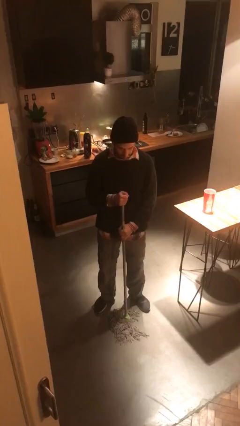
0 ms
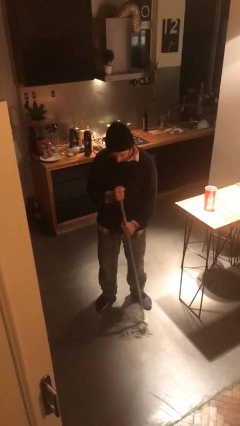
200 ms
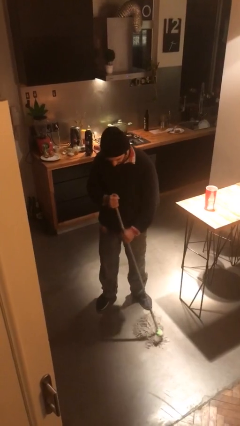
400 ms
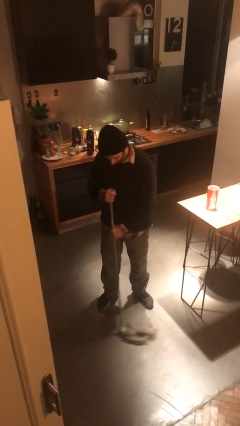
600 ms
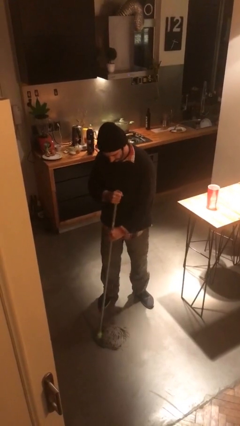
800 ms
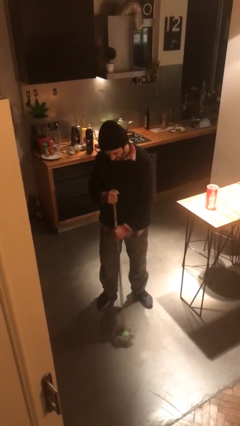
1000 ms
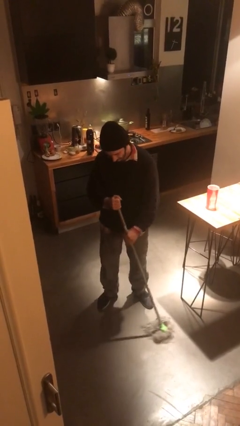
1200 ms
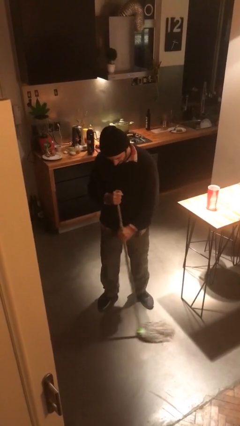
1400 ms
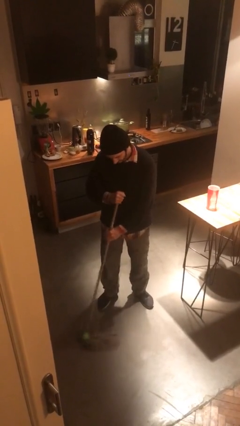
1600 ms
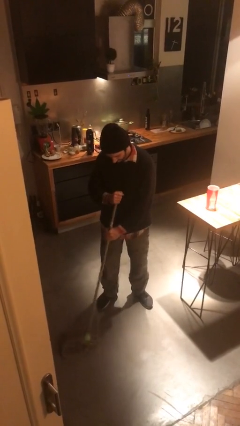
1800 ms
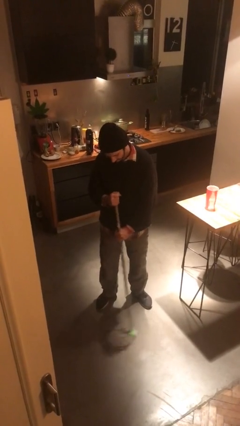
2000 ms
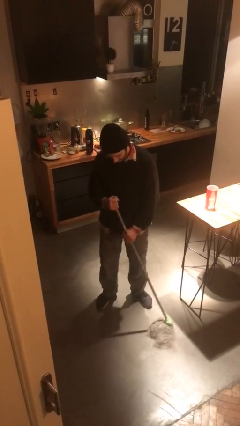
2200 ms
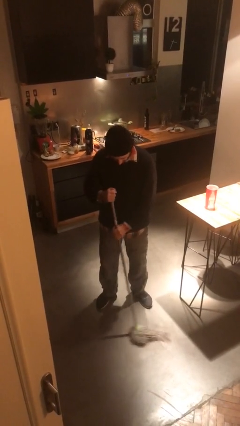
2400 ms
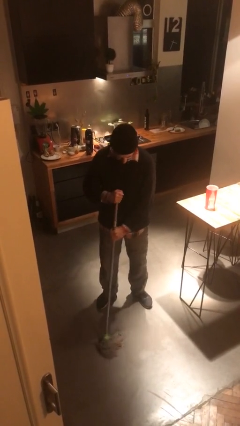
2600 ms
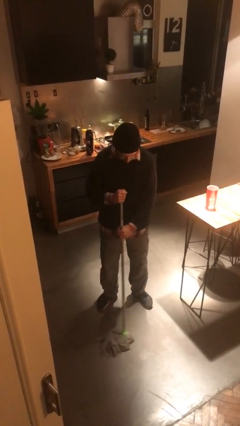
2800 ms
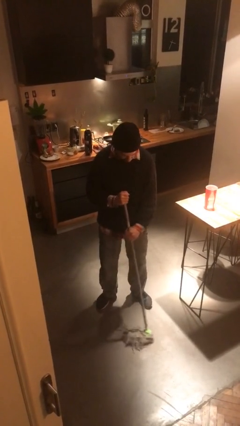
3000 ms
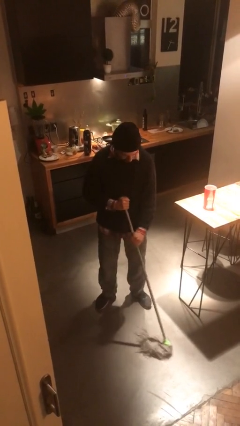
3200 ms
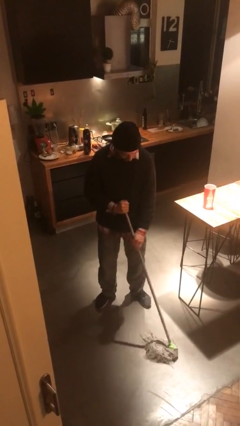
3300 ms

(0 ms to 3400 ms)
person mops

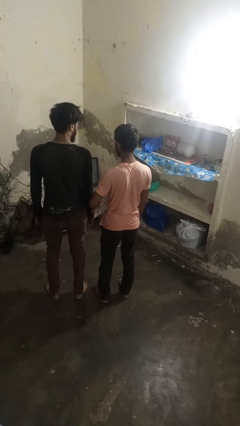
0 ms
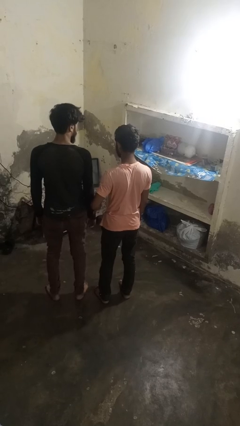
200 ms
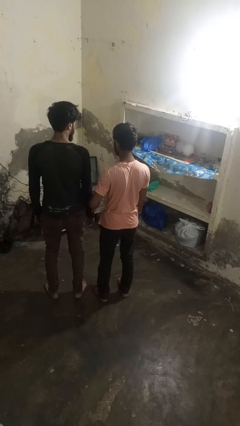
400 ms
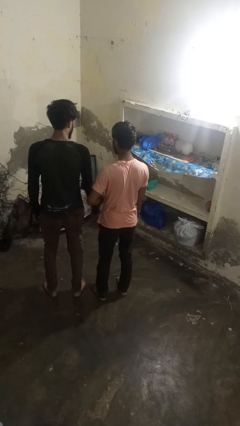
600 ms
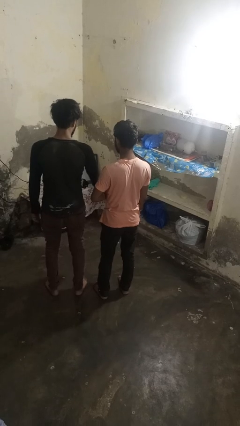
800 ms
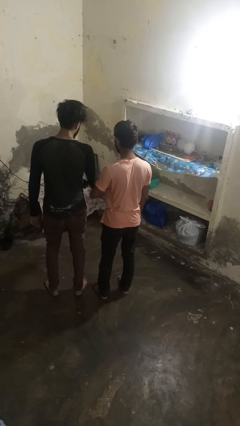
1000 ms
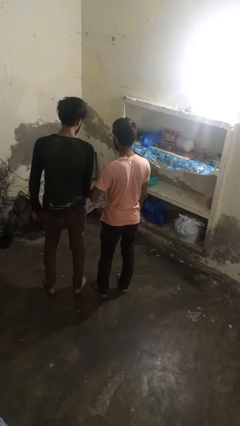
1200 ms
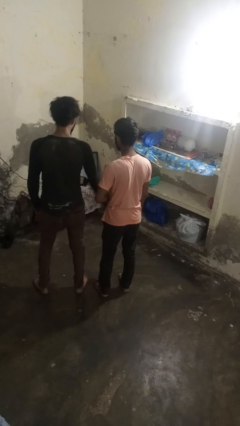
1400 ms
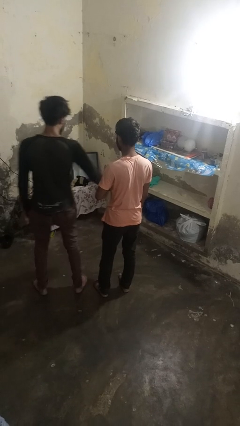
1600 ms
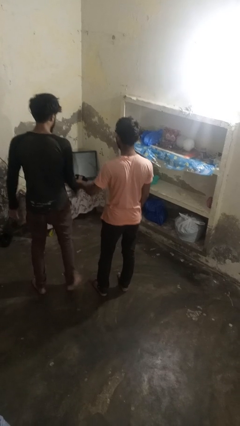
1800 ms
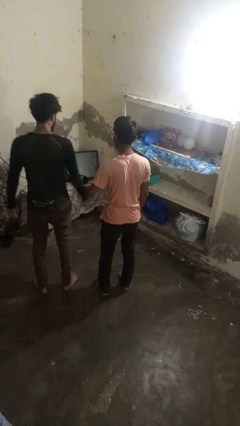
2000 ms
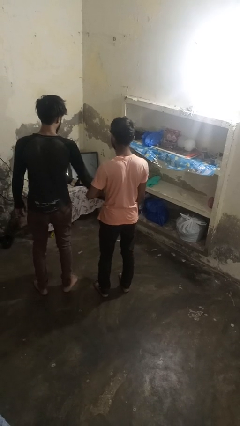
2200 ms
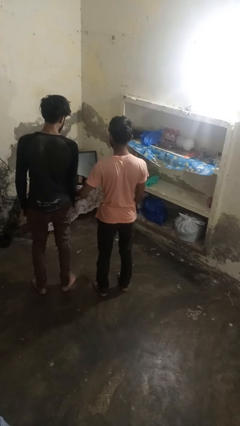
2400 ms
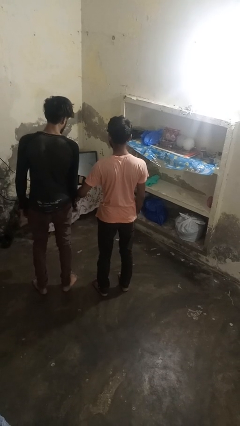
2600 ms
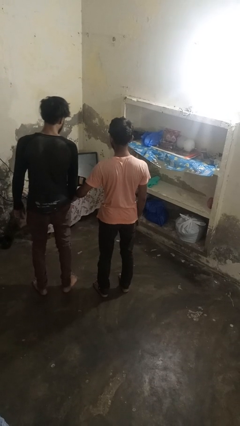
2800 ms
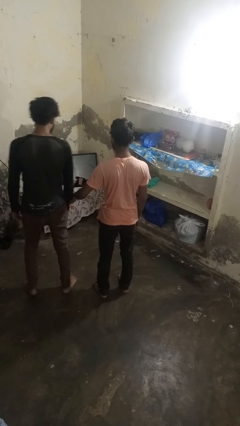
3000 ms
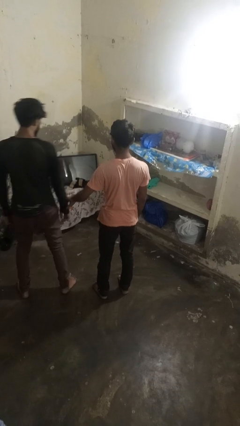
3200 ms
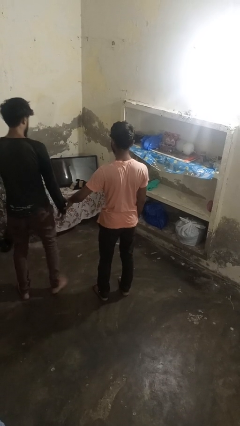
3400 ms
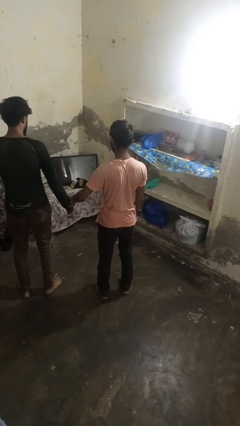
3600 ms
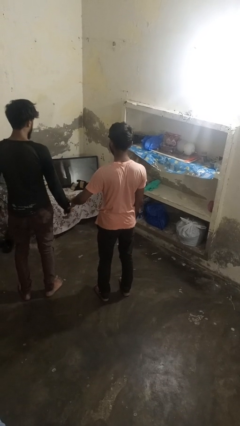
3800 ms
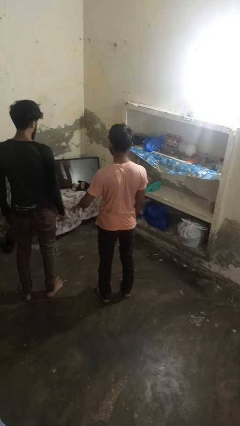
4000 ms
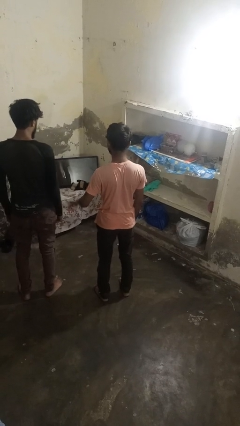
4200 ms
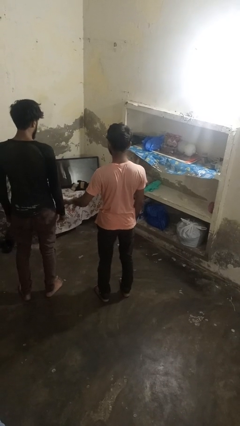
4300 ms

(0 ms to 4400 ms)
person grabs person by forearm

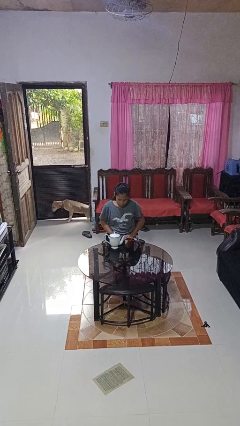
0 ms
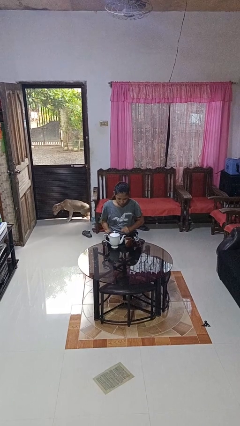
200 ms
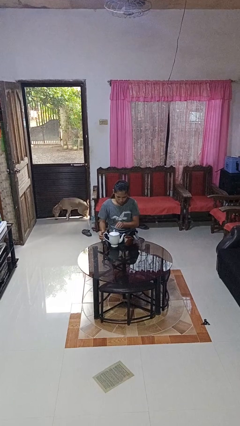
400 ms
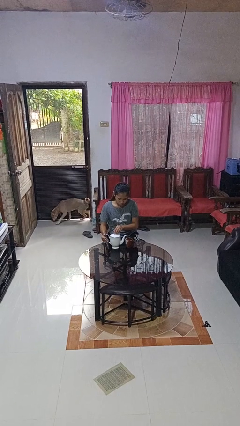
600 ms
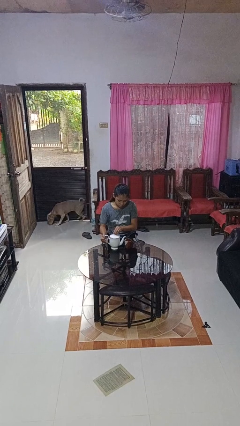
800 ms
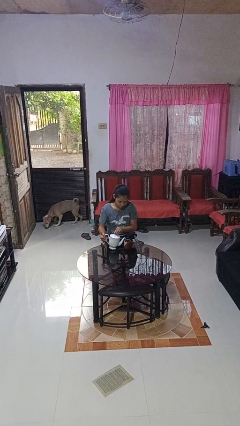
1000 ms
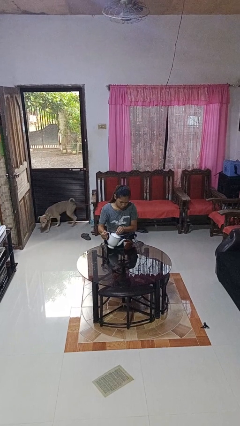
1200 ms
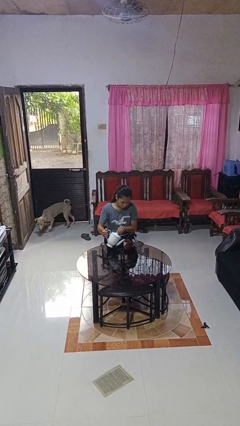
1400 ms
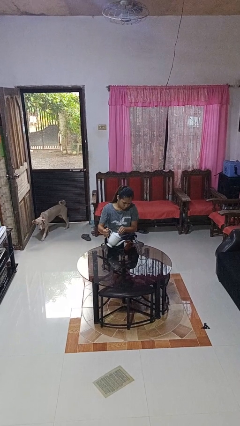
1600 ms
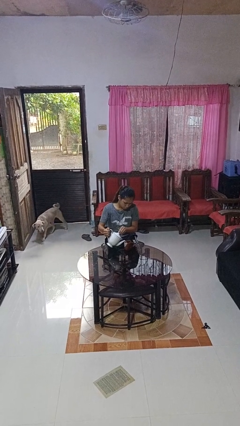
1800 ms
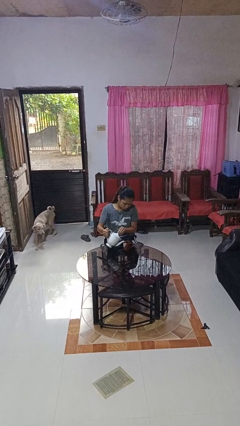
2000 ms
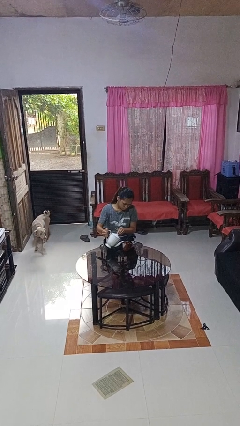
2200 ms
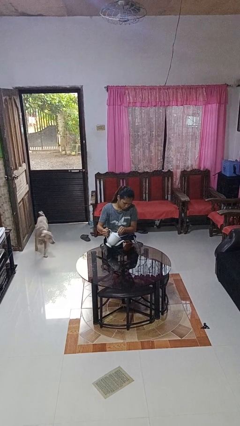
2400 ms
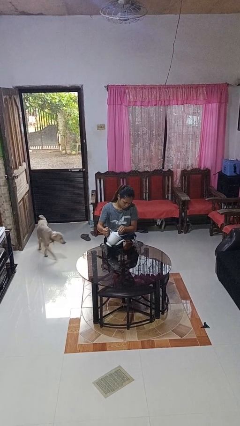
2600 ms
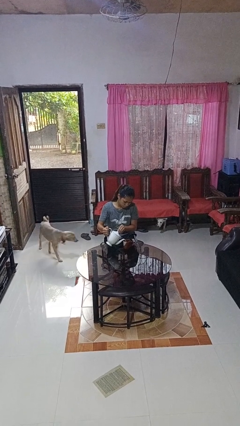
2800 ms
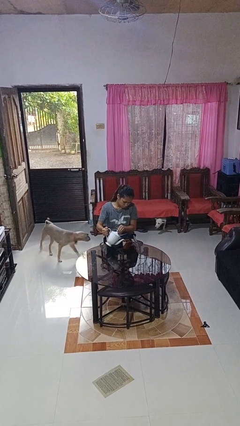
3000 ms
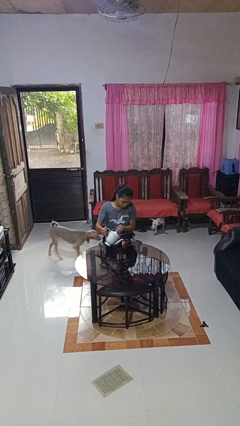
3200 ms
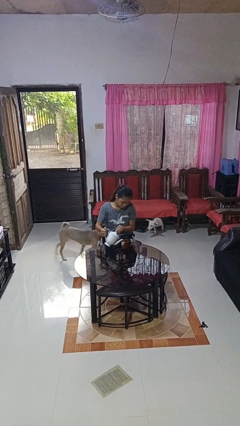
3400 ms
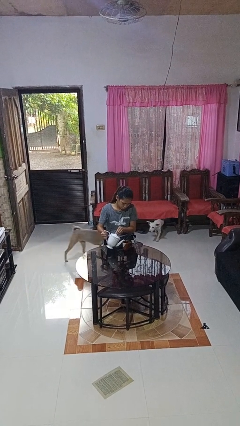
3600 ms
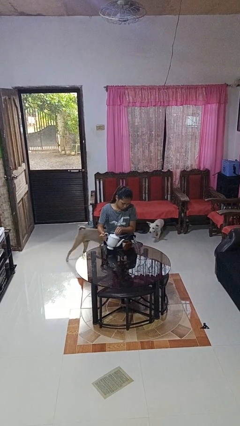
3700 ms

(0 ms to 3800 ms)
person pours coffee into mug

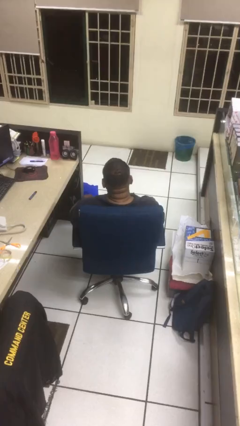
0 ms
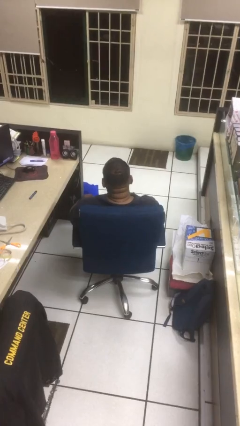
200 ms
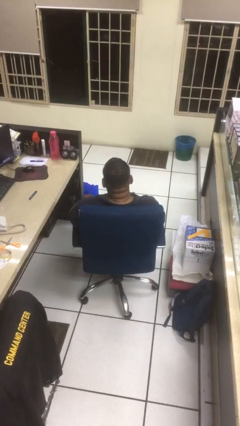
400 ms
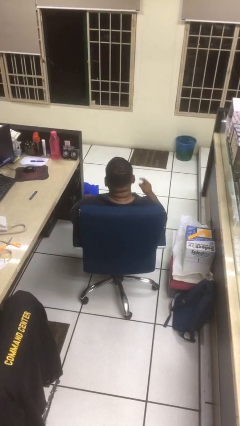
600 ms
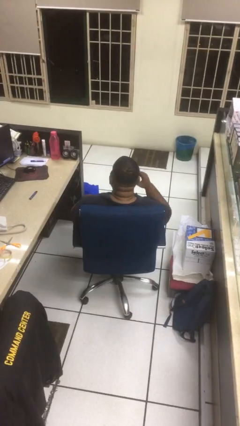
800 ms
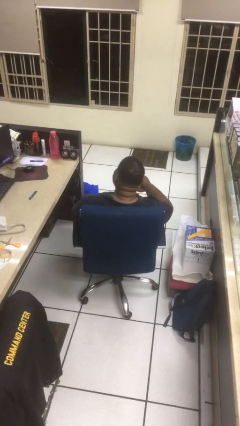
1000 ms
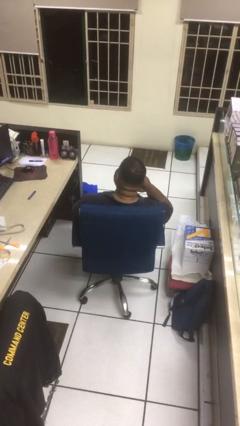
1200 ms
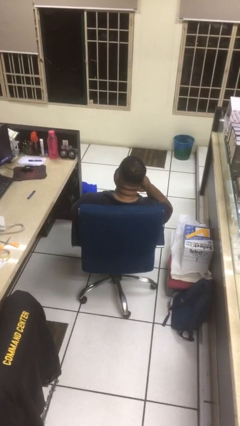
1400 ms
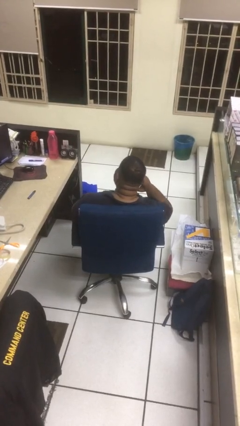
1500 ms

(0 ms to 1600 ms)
person gestures listen closely

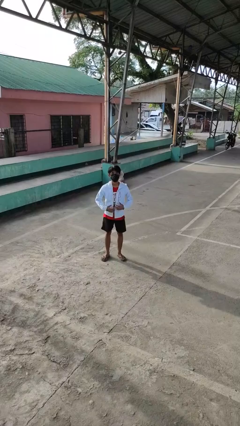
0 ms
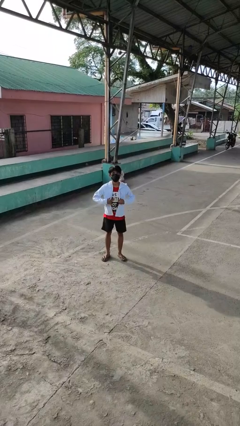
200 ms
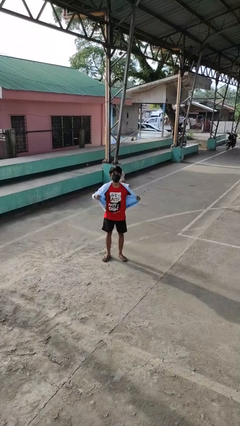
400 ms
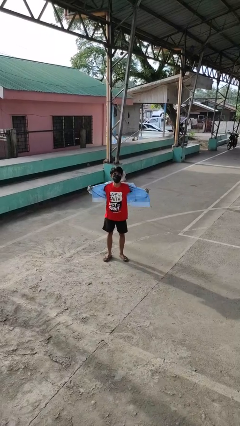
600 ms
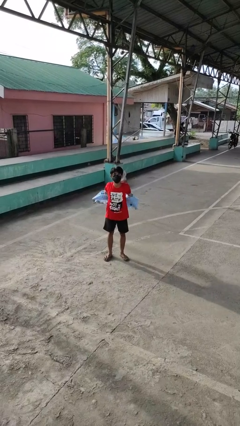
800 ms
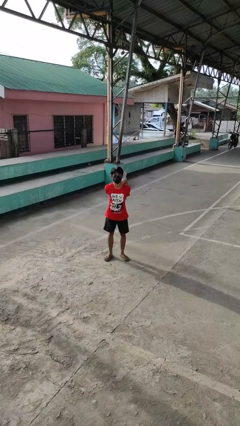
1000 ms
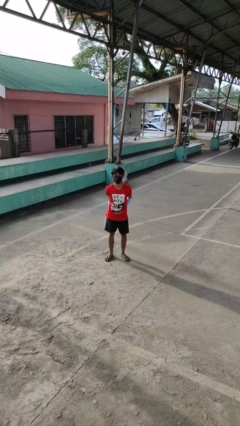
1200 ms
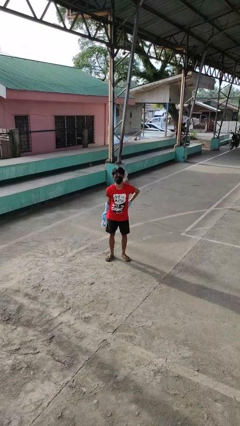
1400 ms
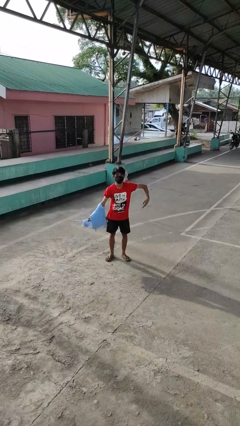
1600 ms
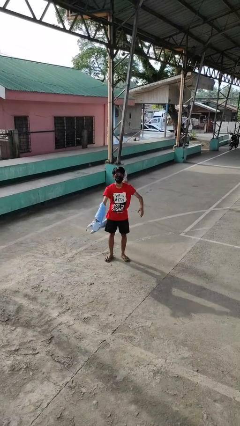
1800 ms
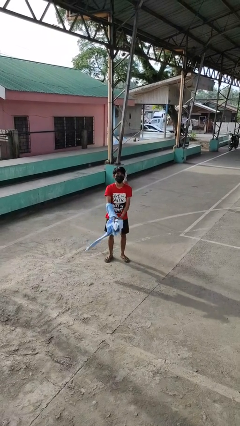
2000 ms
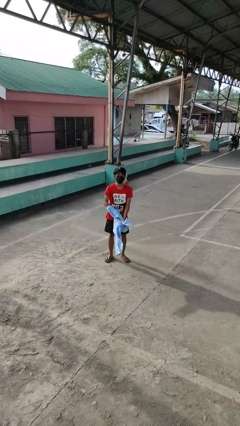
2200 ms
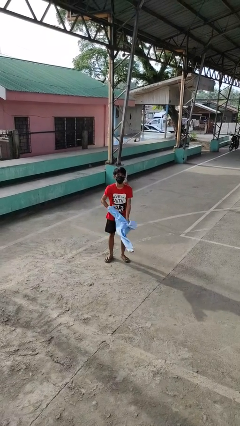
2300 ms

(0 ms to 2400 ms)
person takes off jacket

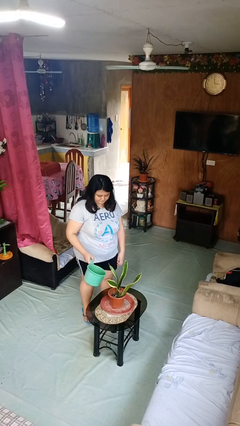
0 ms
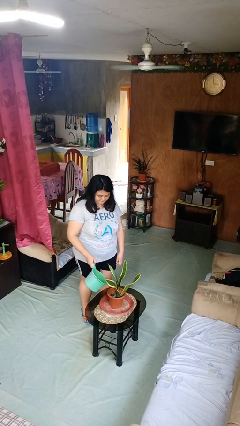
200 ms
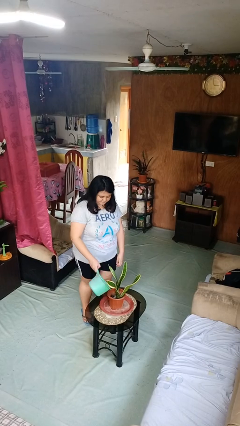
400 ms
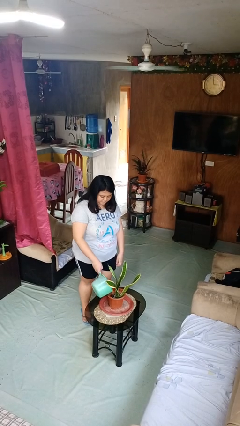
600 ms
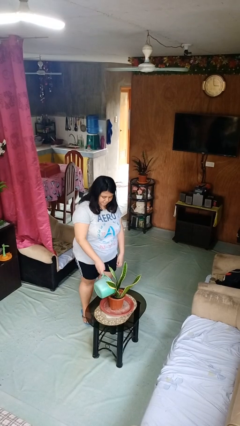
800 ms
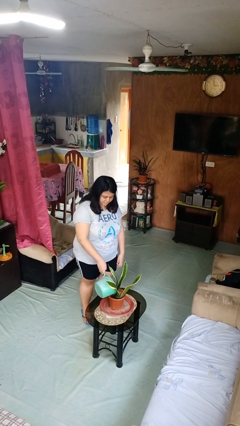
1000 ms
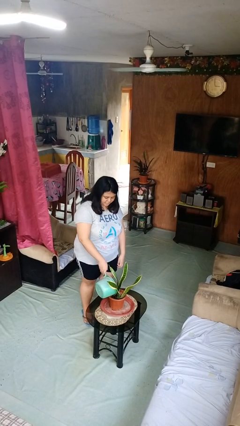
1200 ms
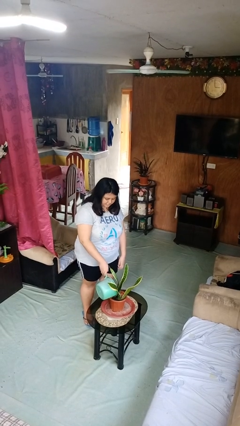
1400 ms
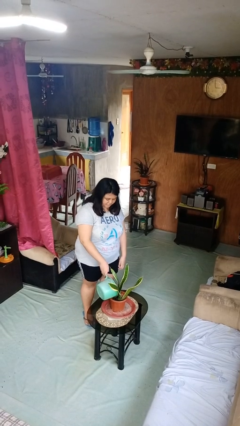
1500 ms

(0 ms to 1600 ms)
person waters houseplant

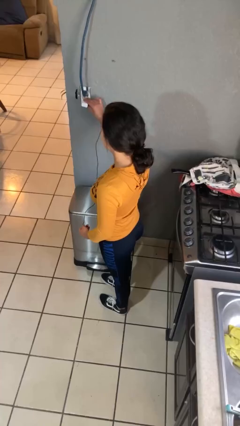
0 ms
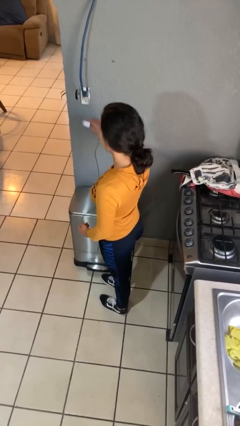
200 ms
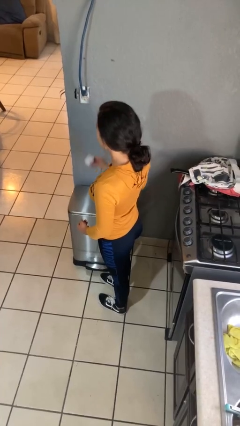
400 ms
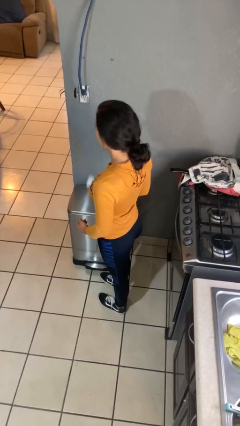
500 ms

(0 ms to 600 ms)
person unplugs from electrical socket
